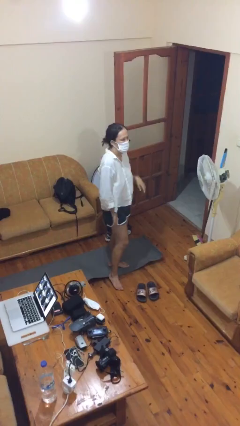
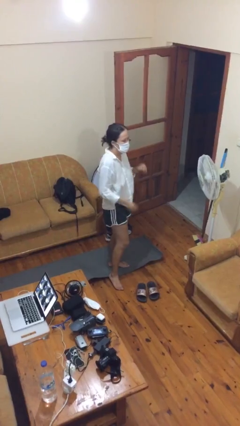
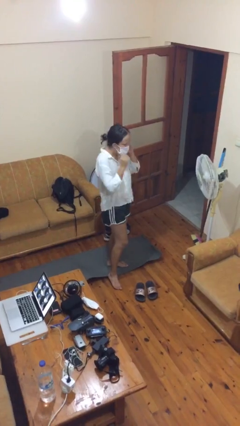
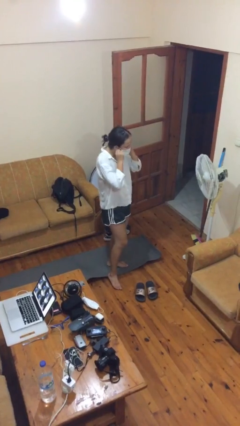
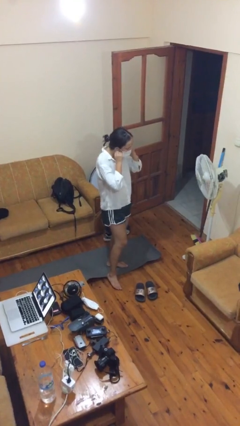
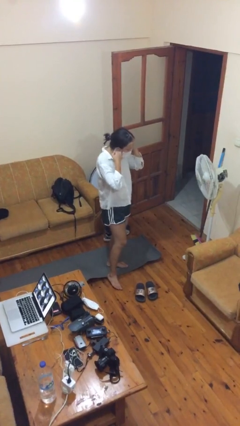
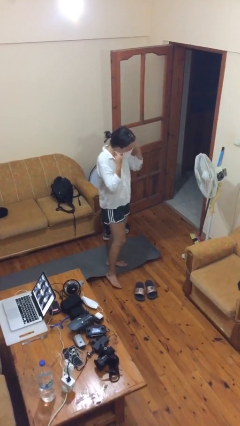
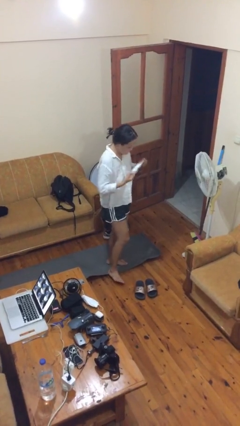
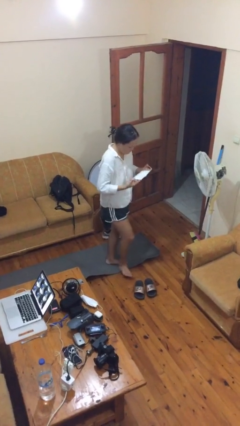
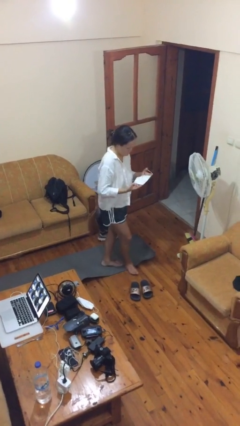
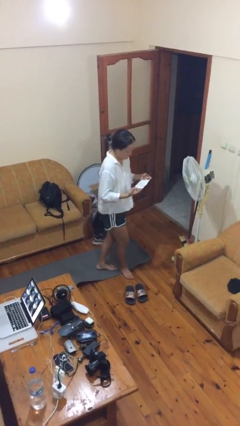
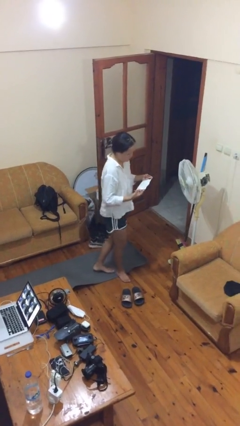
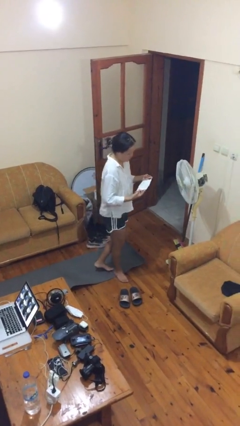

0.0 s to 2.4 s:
person takes off facemask

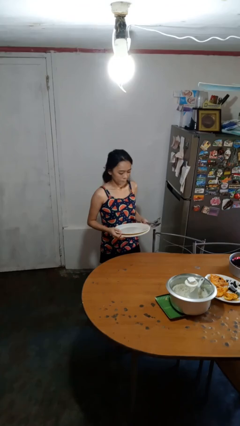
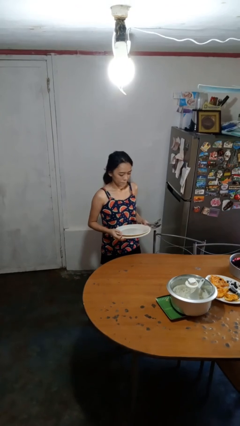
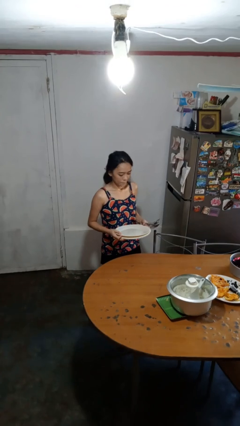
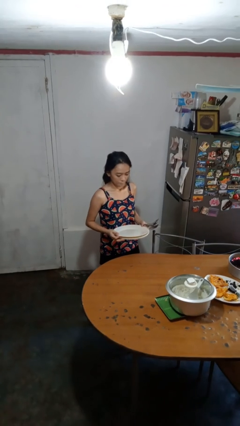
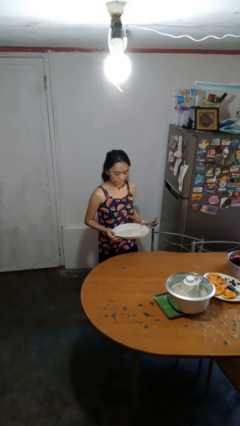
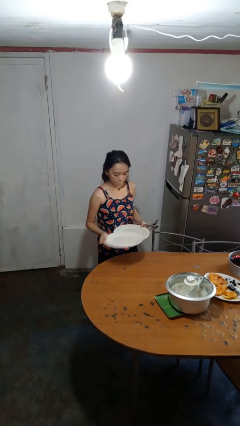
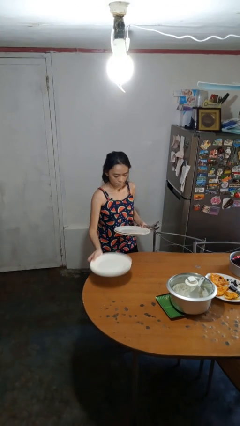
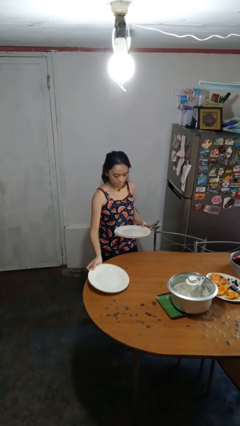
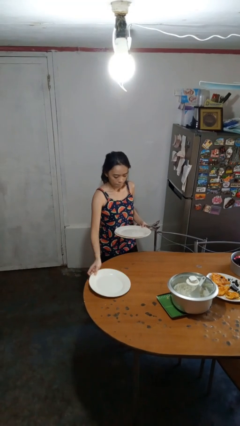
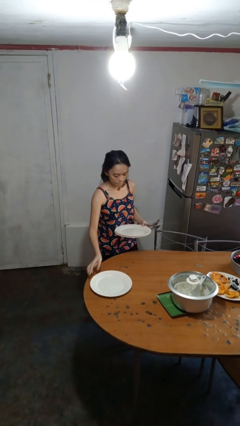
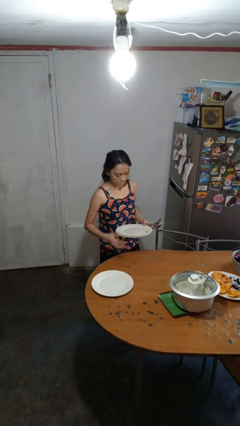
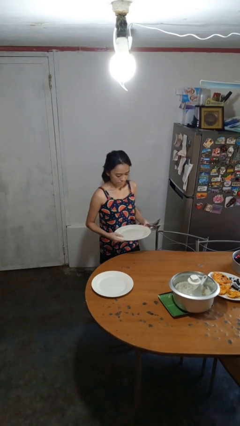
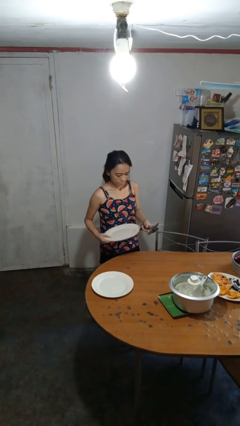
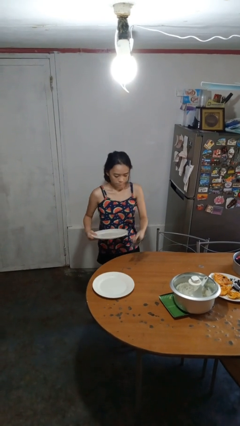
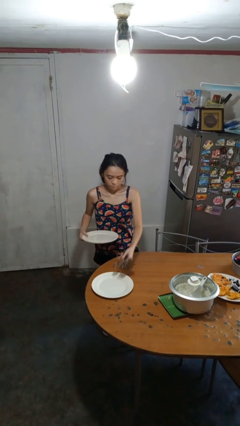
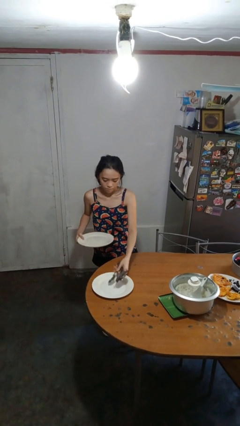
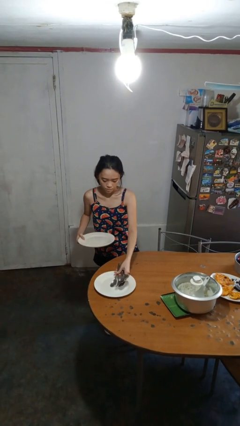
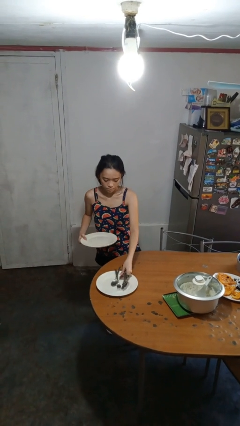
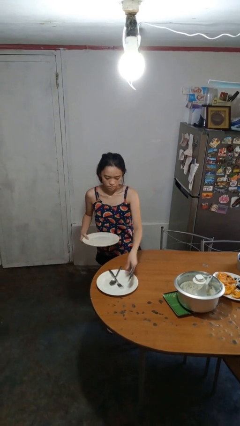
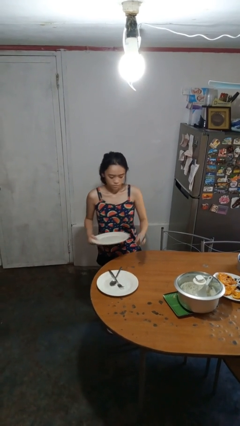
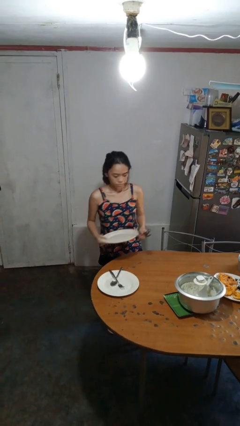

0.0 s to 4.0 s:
person sets table

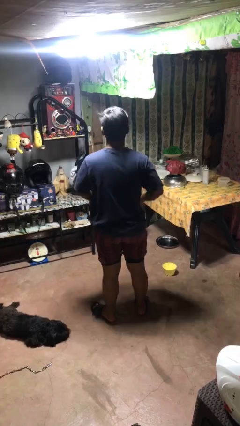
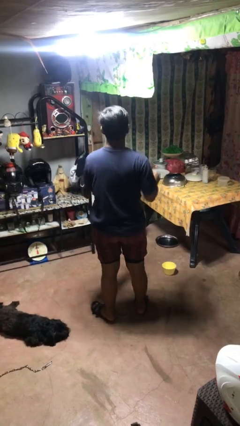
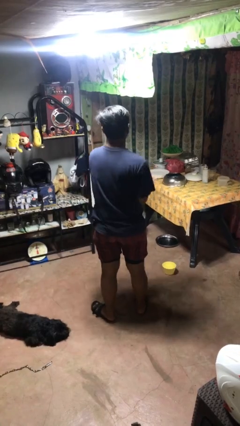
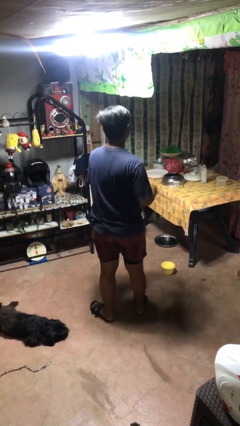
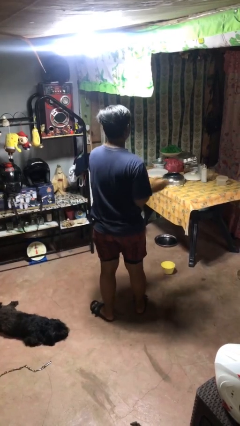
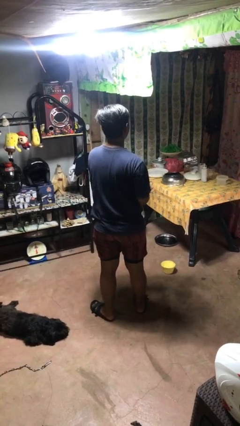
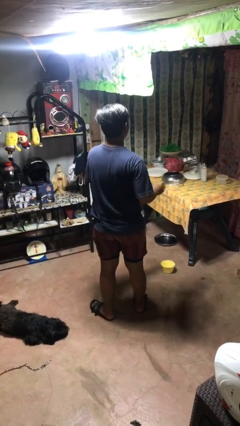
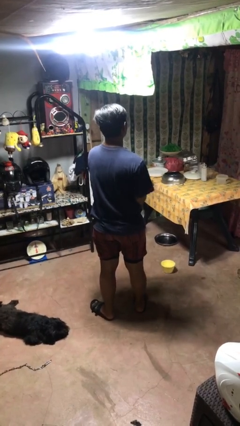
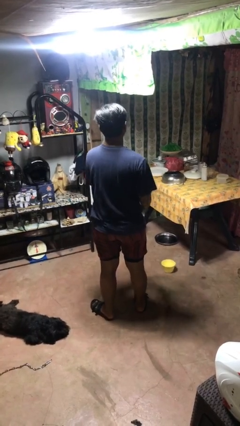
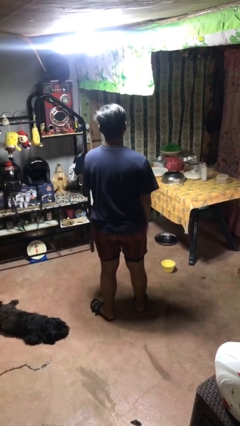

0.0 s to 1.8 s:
person claps hands

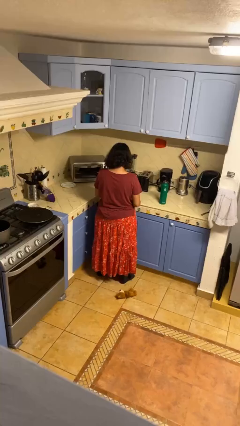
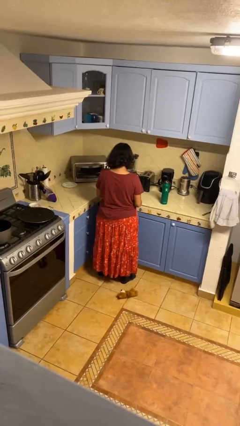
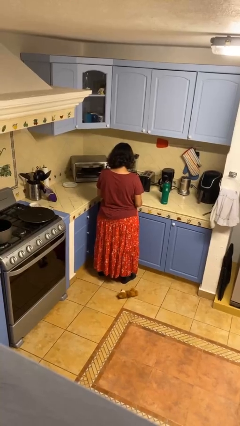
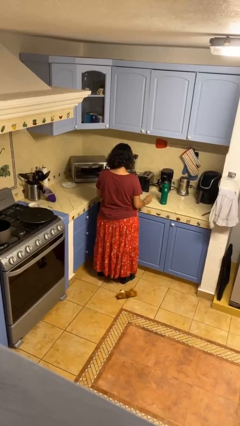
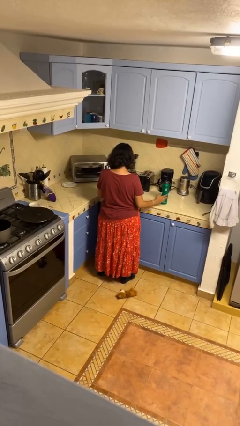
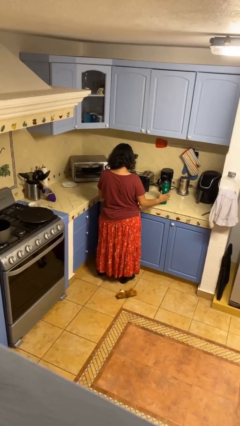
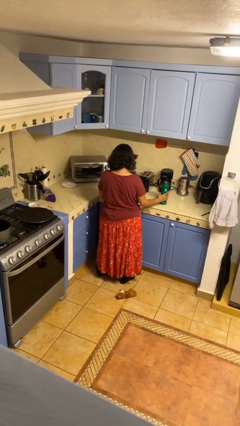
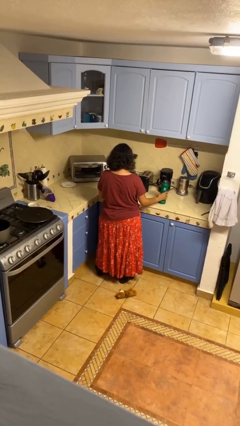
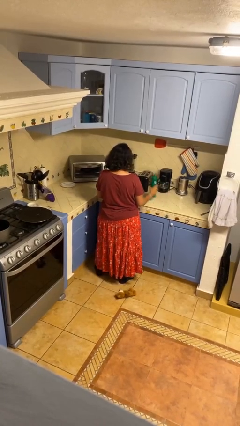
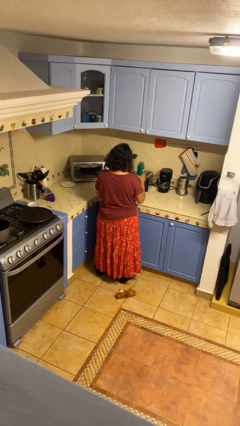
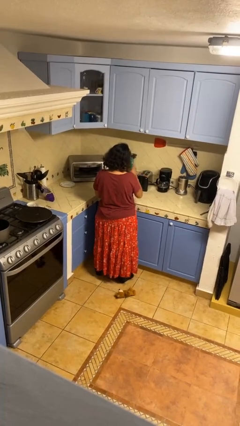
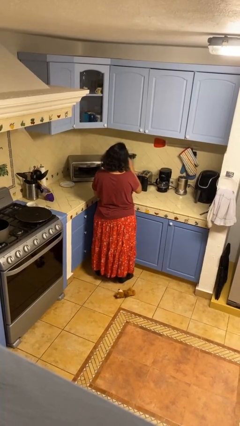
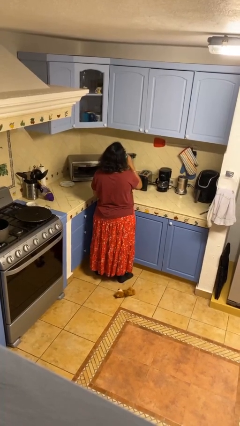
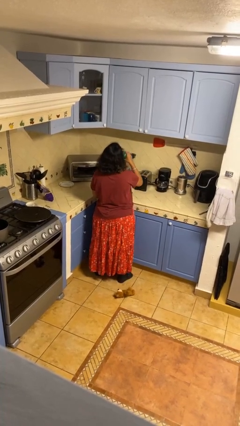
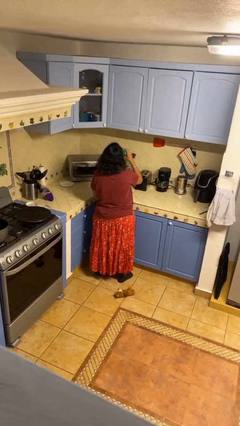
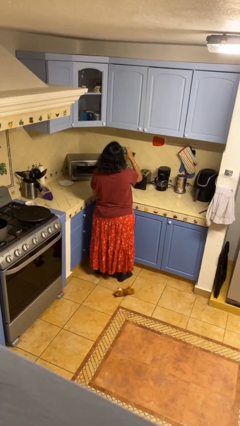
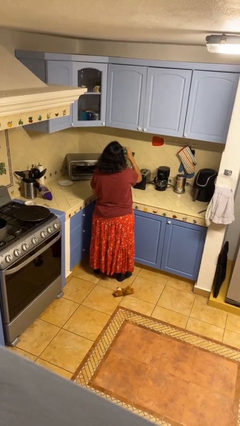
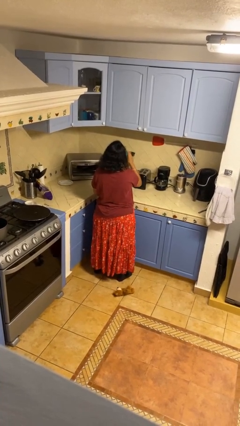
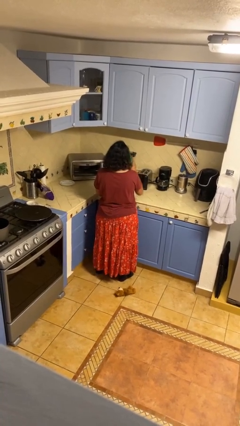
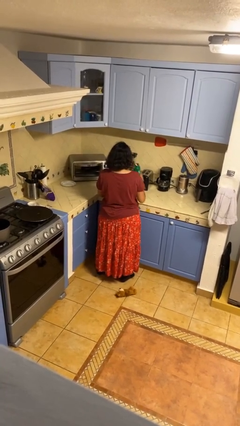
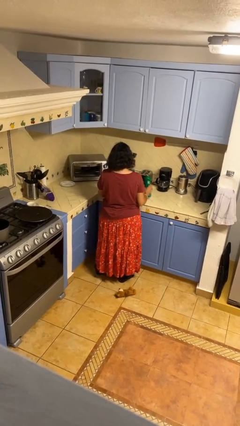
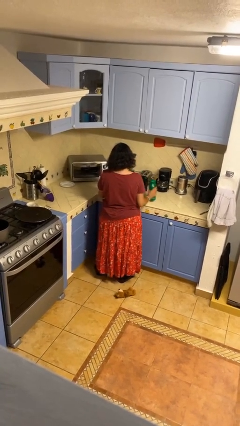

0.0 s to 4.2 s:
person drinks from bottle

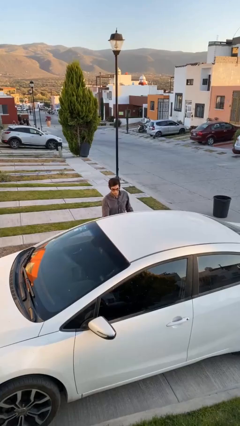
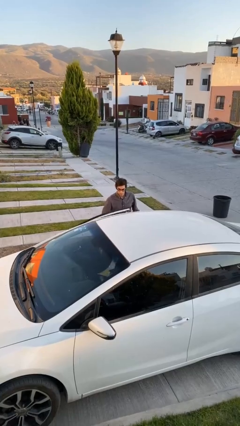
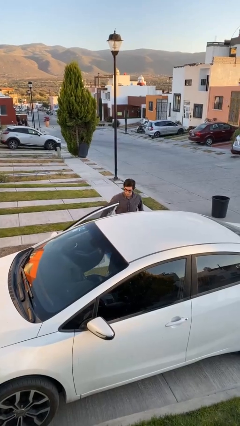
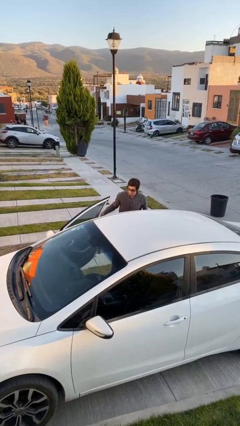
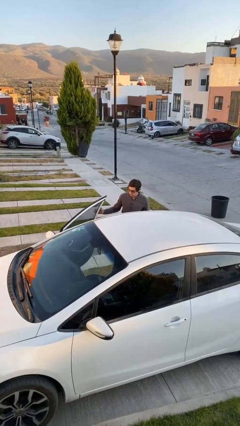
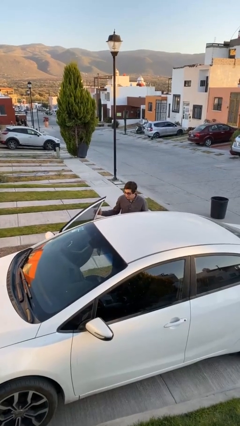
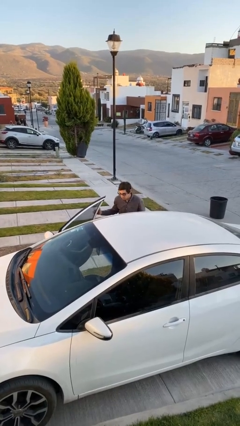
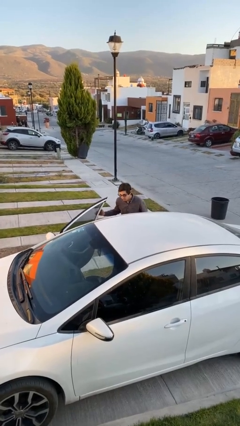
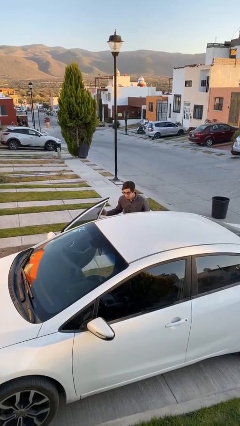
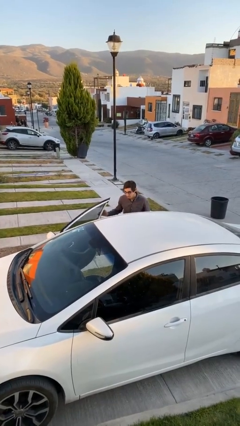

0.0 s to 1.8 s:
person opens car door

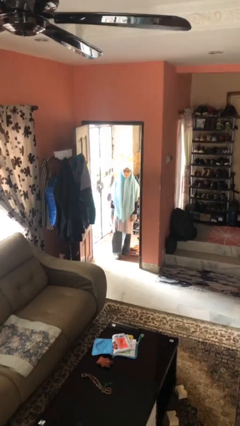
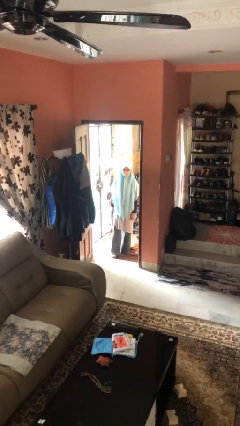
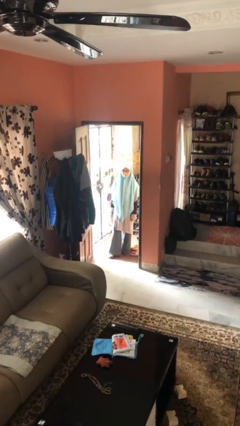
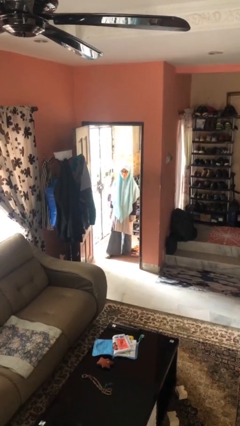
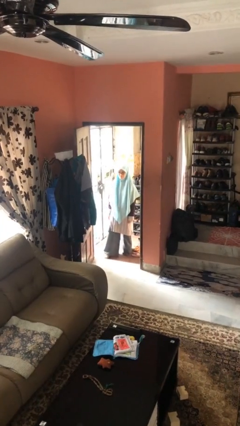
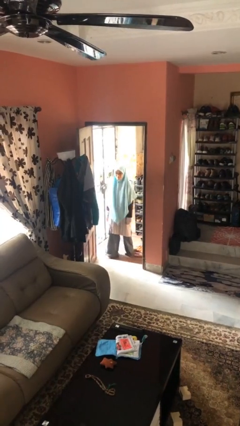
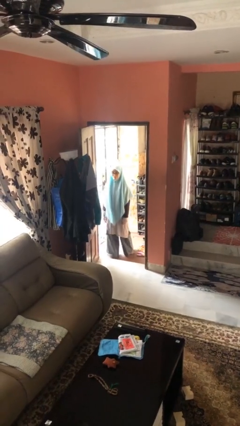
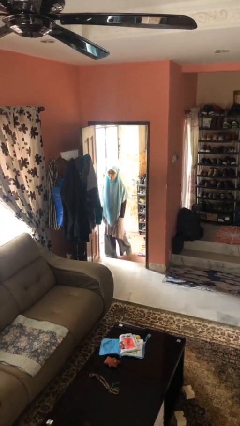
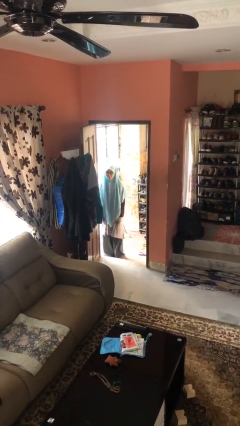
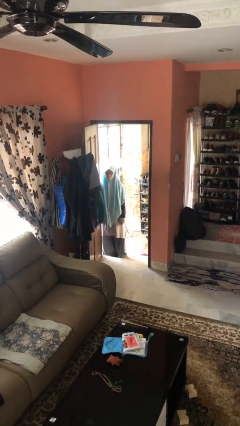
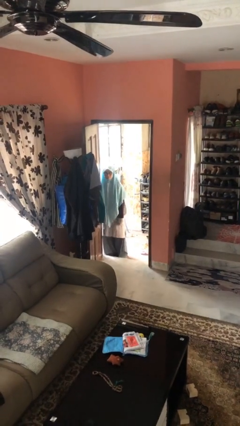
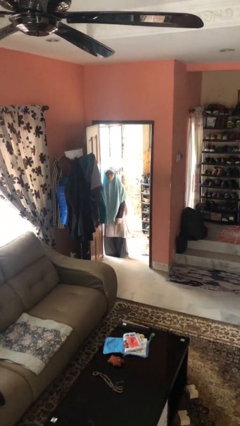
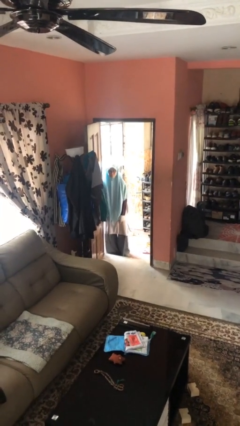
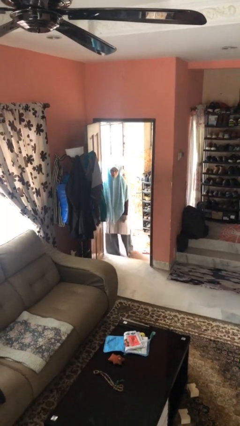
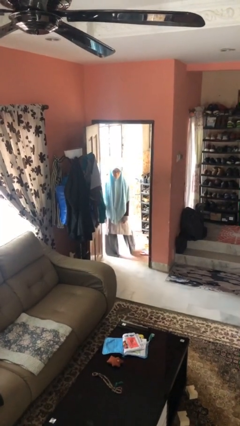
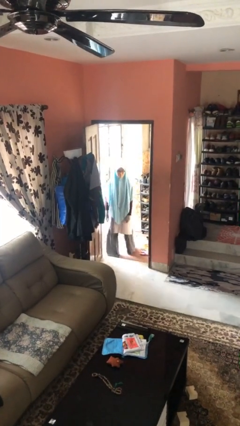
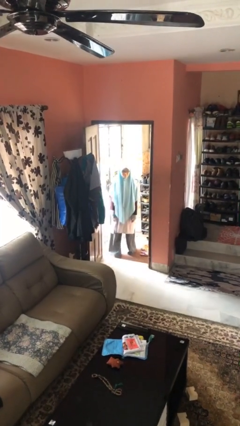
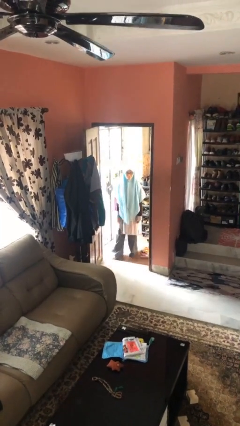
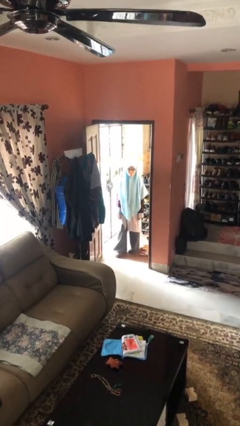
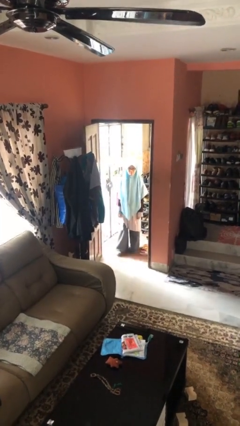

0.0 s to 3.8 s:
person bumps into wall
